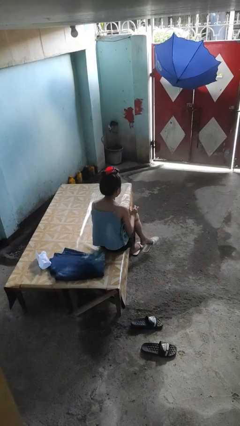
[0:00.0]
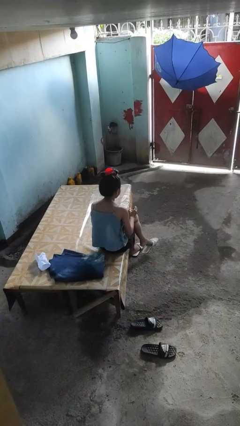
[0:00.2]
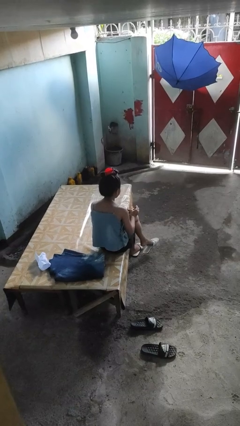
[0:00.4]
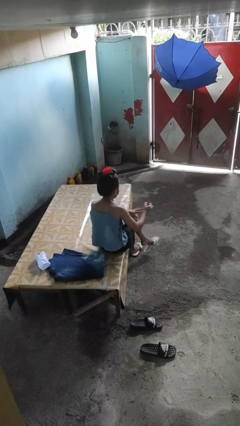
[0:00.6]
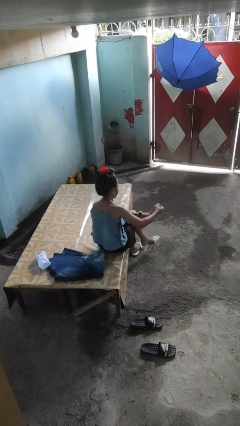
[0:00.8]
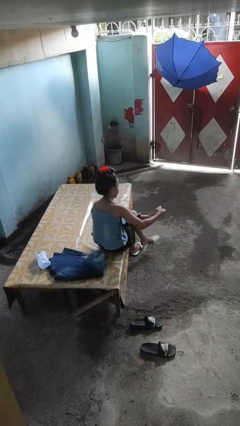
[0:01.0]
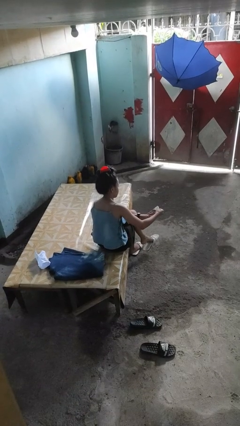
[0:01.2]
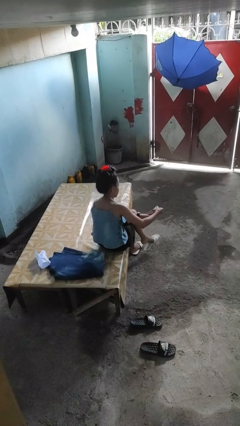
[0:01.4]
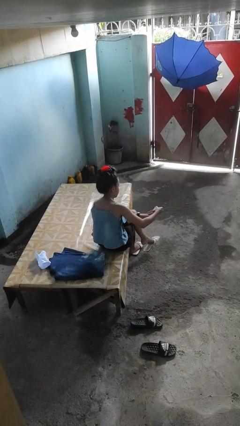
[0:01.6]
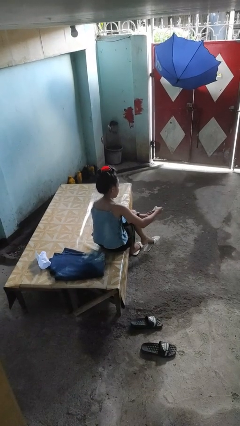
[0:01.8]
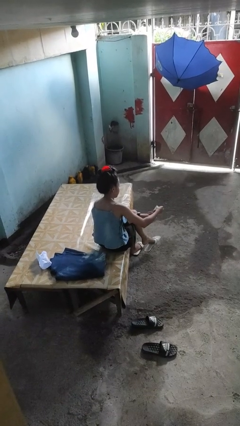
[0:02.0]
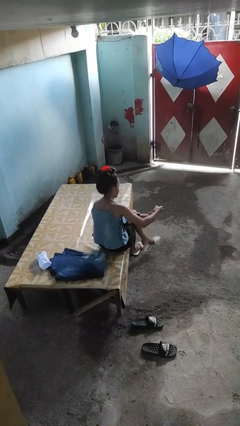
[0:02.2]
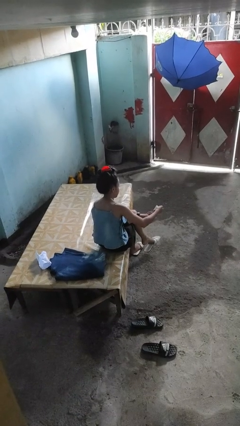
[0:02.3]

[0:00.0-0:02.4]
person clips fingernails

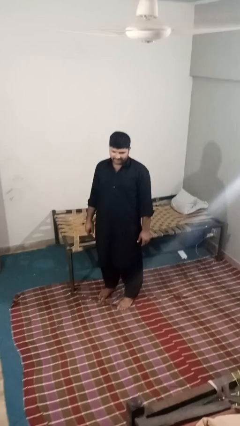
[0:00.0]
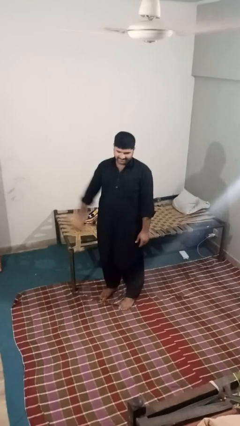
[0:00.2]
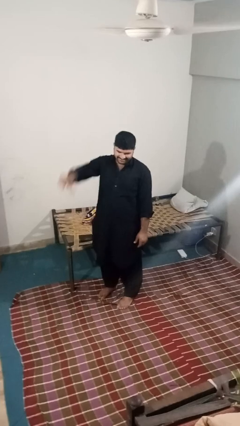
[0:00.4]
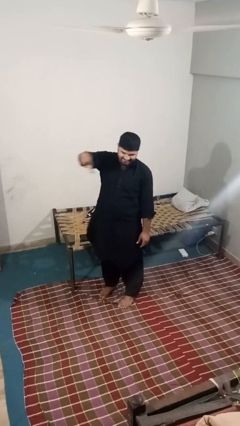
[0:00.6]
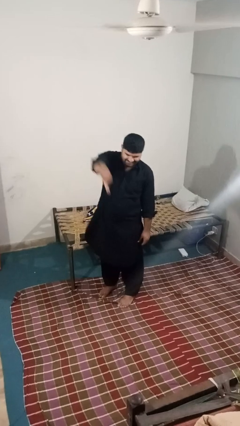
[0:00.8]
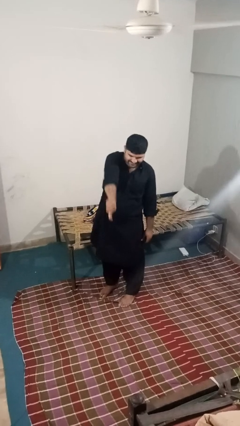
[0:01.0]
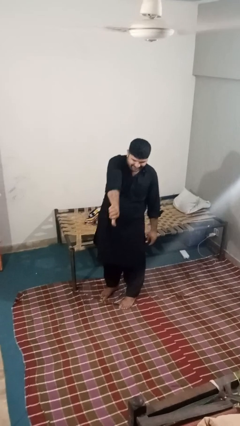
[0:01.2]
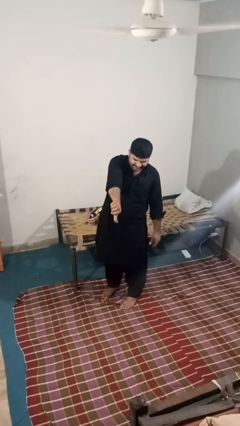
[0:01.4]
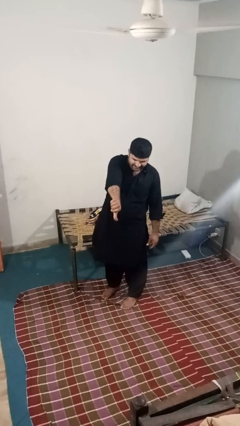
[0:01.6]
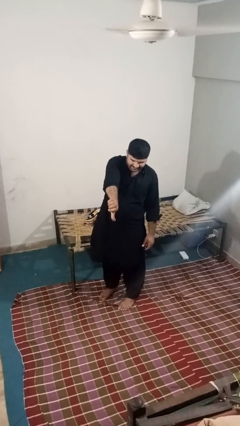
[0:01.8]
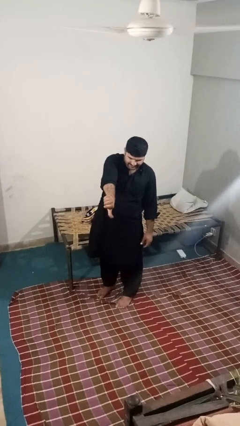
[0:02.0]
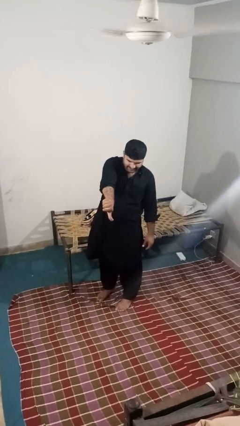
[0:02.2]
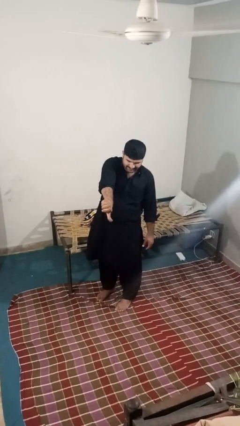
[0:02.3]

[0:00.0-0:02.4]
person gestures thumbs down

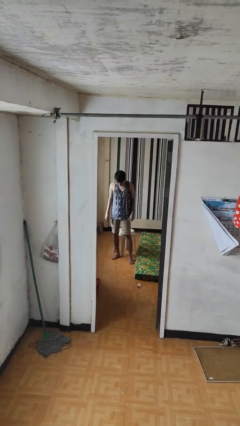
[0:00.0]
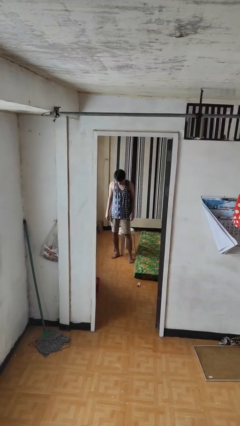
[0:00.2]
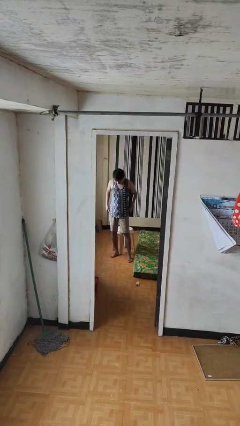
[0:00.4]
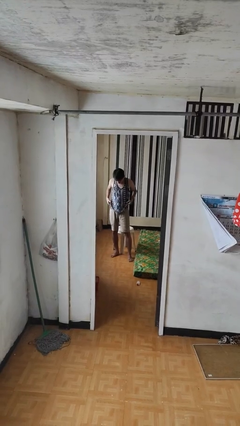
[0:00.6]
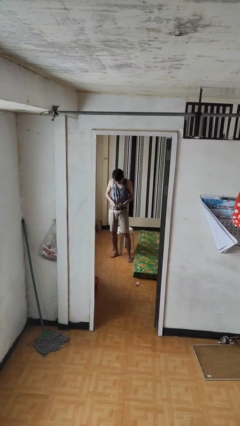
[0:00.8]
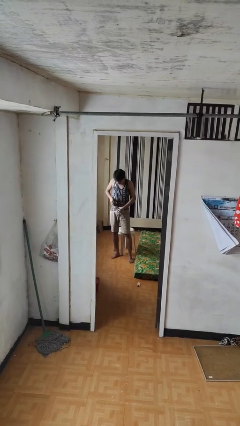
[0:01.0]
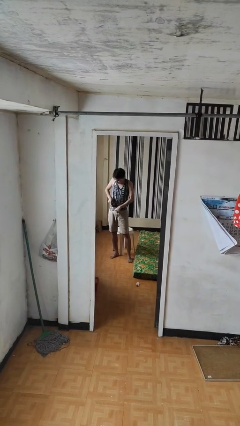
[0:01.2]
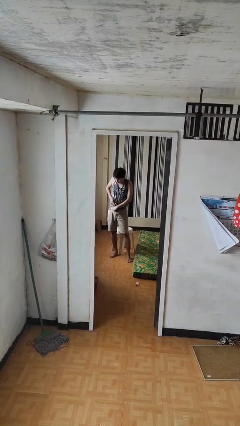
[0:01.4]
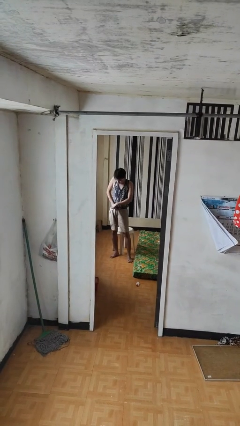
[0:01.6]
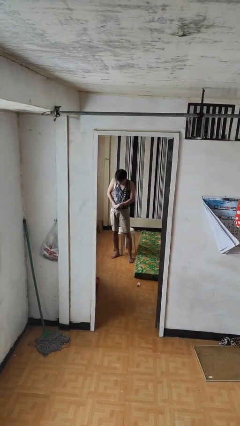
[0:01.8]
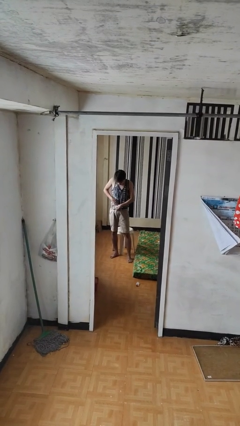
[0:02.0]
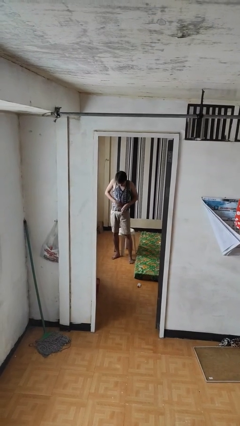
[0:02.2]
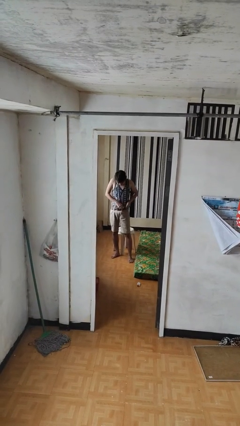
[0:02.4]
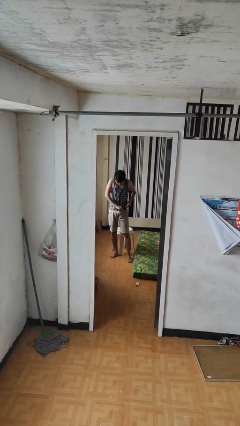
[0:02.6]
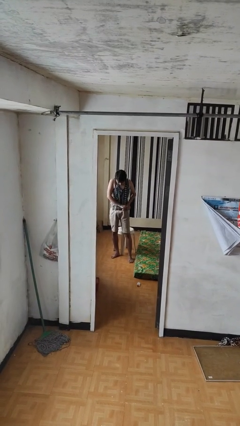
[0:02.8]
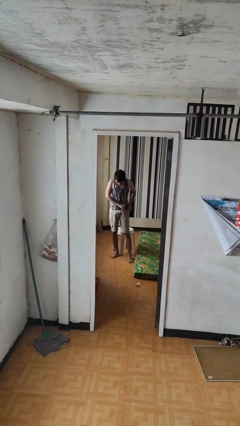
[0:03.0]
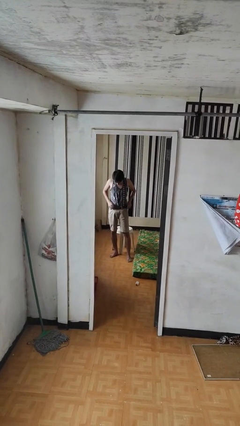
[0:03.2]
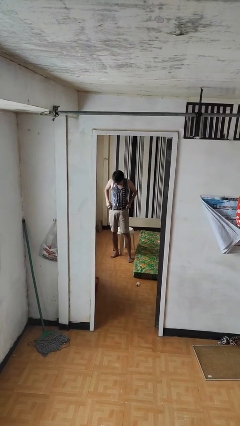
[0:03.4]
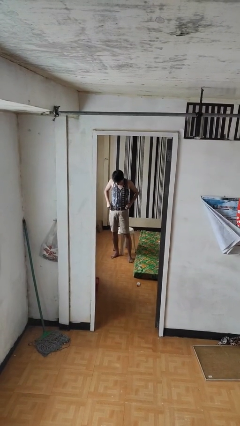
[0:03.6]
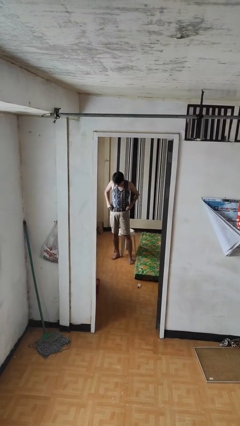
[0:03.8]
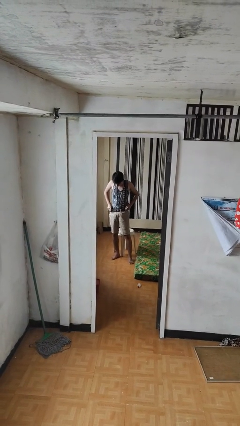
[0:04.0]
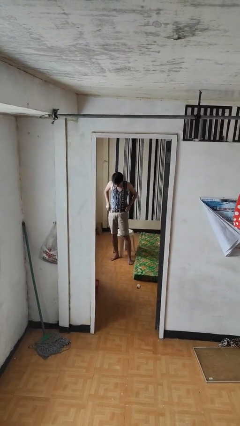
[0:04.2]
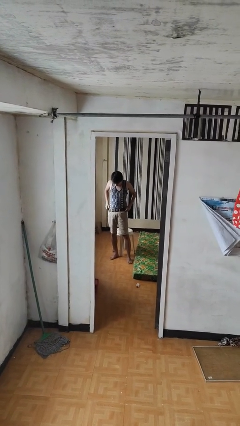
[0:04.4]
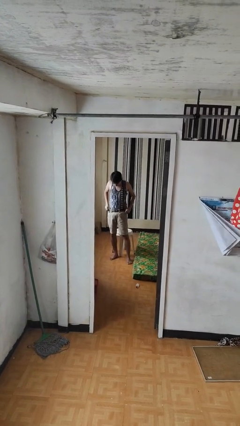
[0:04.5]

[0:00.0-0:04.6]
person tucks in shirt

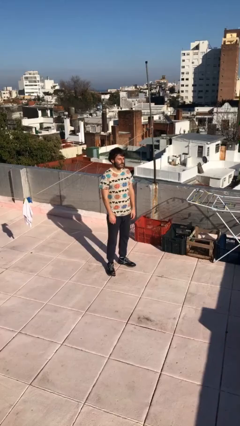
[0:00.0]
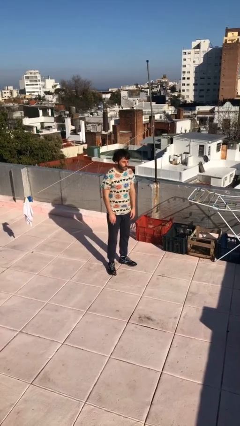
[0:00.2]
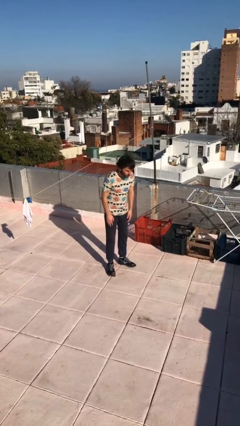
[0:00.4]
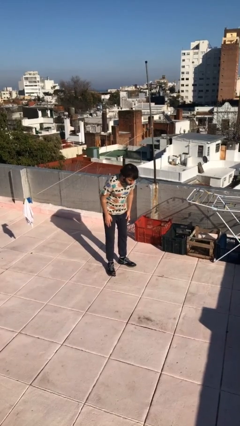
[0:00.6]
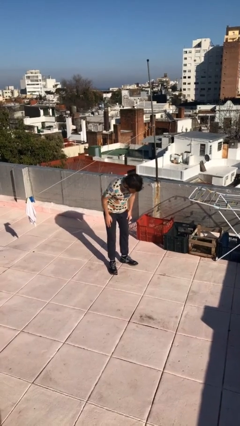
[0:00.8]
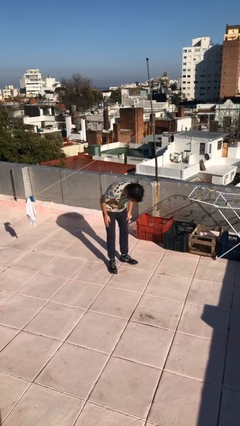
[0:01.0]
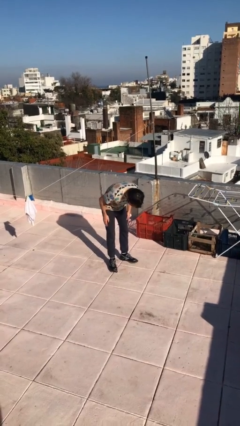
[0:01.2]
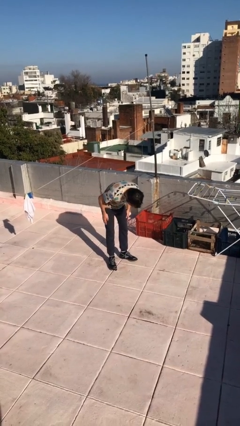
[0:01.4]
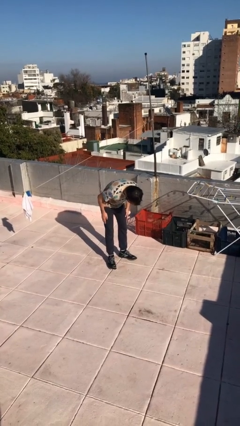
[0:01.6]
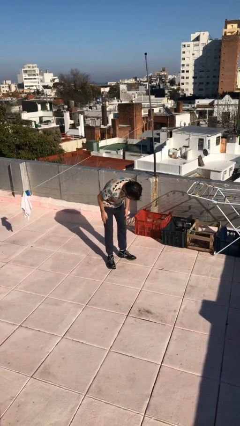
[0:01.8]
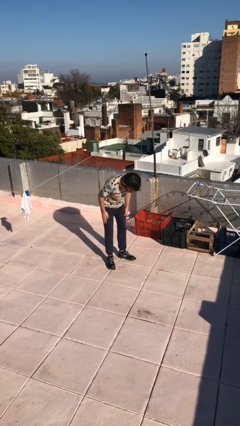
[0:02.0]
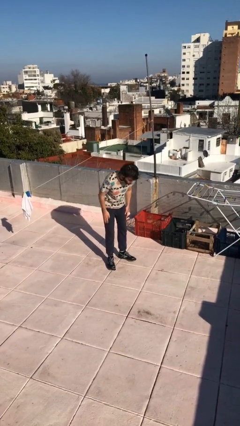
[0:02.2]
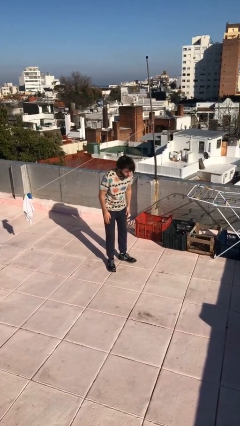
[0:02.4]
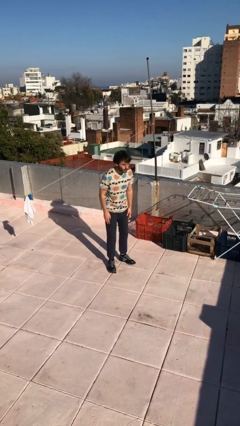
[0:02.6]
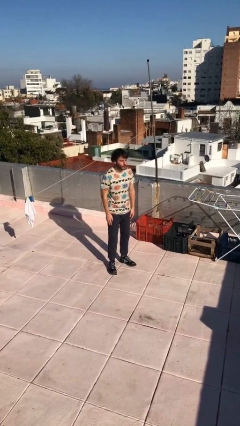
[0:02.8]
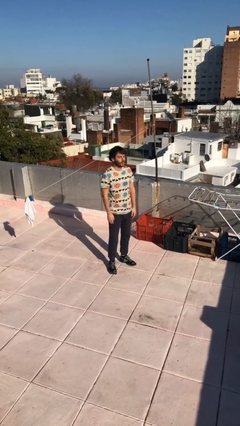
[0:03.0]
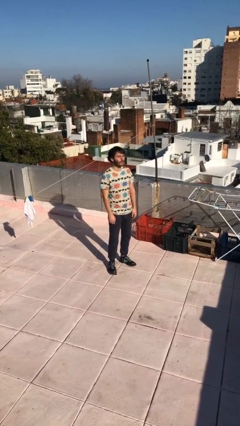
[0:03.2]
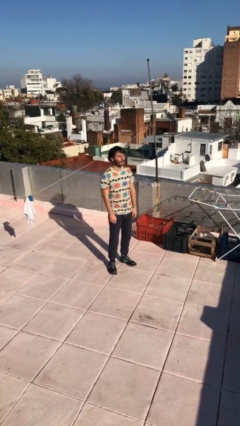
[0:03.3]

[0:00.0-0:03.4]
person bows

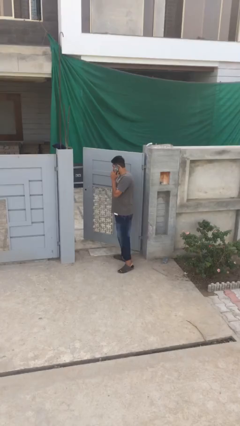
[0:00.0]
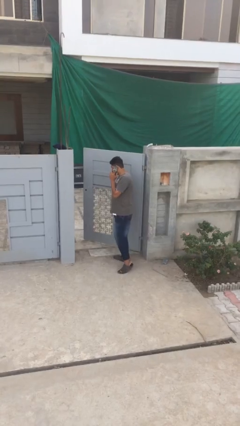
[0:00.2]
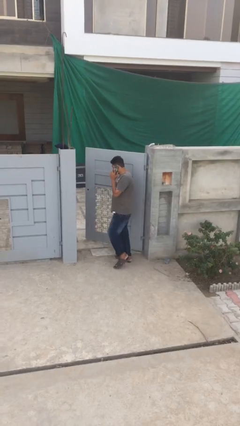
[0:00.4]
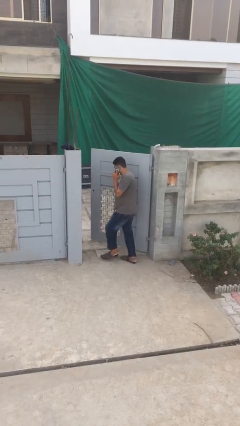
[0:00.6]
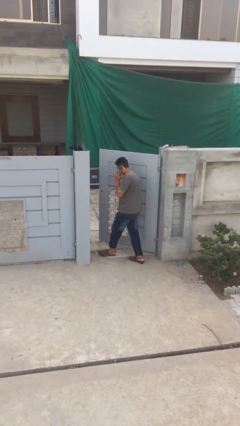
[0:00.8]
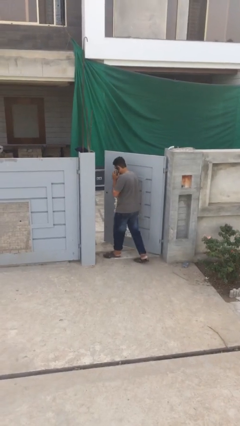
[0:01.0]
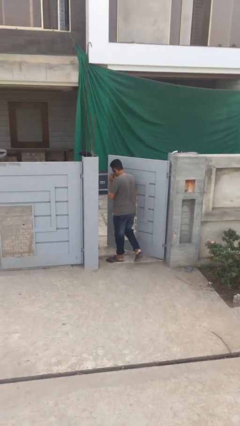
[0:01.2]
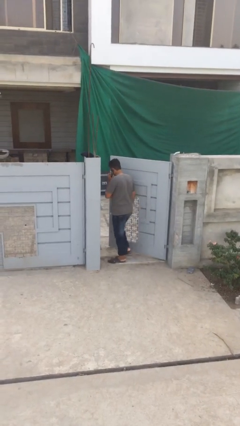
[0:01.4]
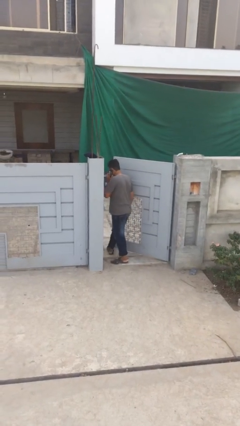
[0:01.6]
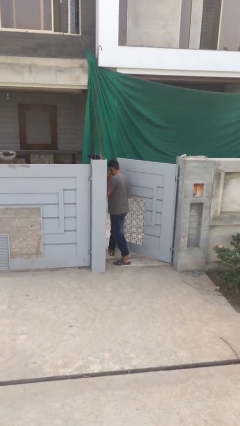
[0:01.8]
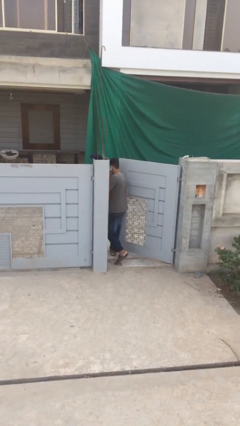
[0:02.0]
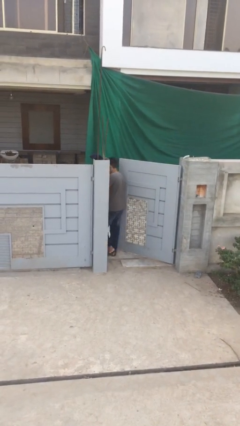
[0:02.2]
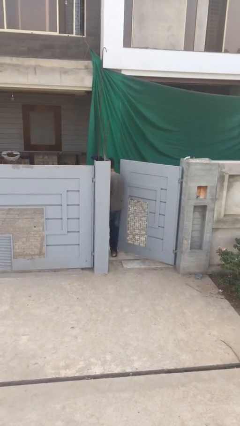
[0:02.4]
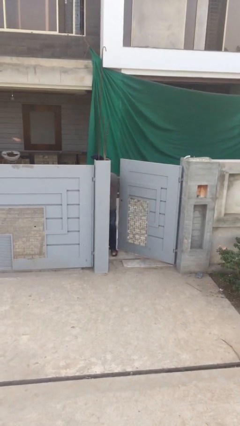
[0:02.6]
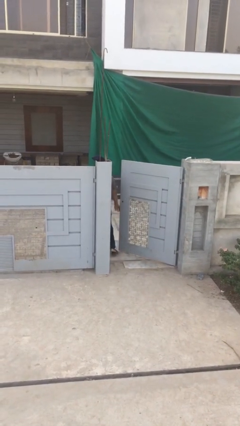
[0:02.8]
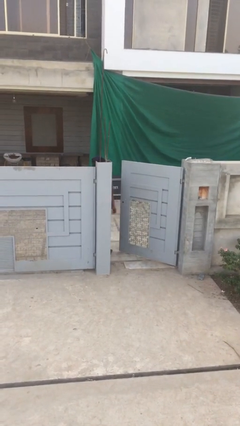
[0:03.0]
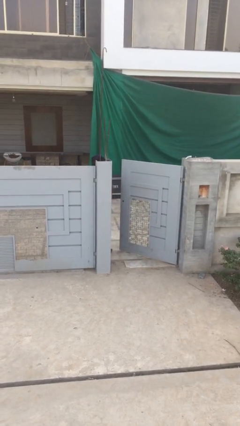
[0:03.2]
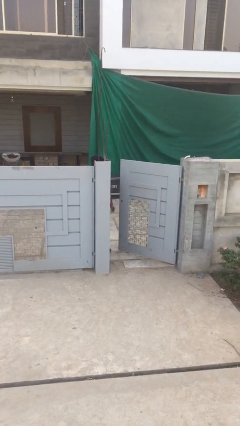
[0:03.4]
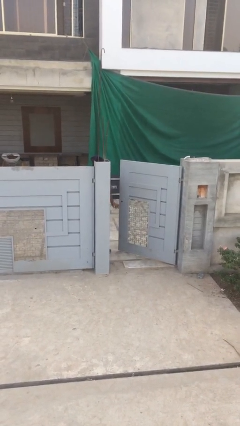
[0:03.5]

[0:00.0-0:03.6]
person exits scene through structure

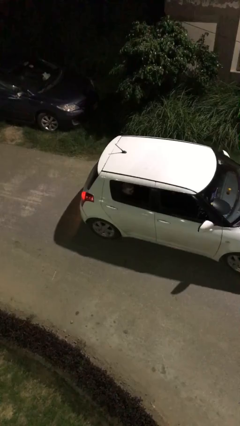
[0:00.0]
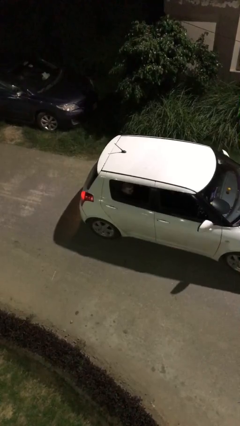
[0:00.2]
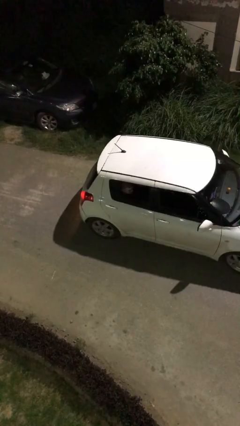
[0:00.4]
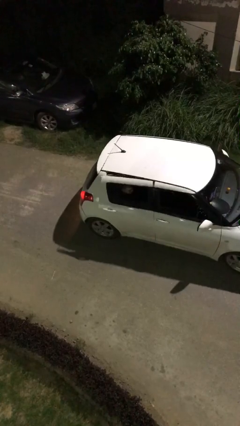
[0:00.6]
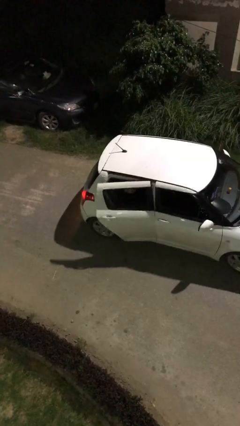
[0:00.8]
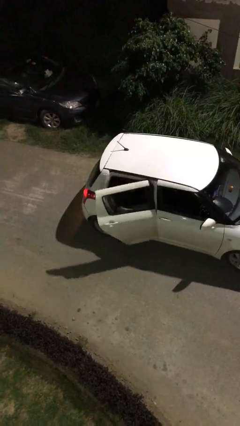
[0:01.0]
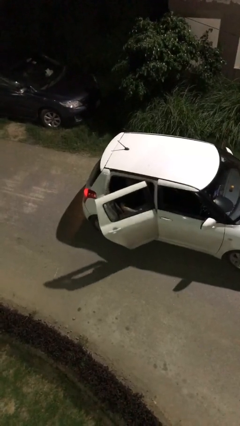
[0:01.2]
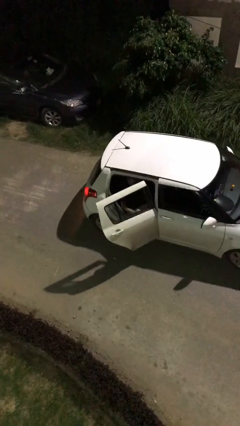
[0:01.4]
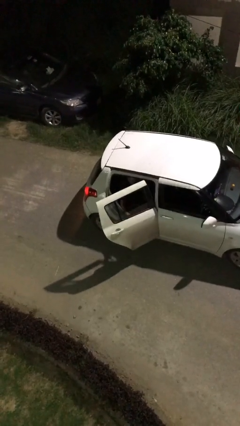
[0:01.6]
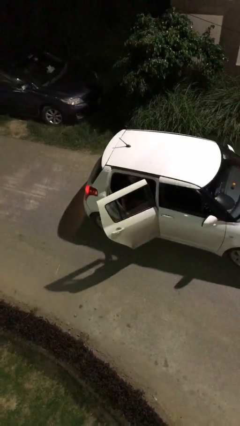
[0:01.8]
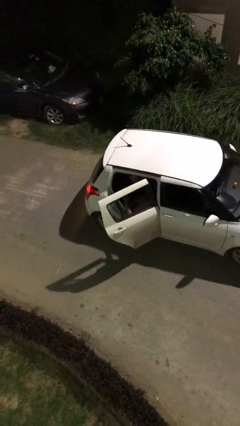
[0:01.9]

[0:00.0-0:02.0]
person opens car door
